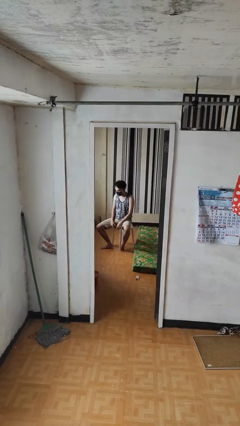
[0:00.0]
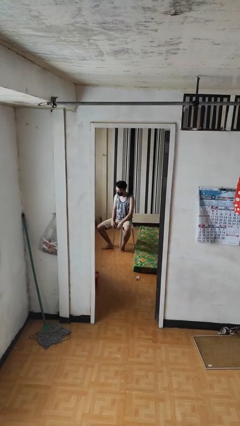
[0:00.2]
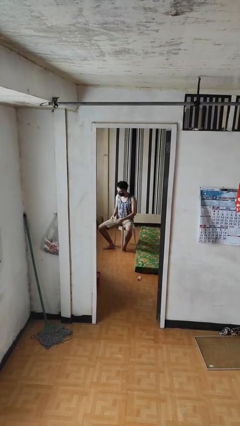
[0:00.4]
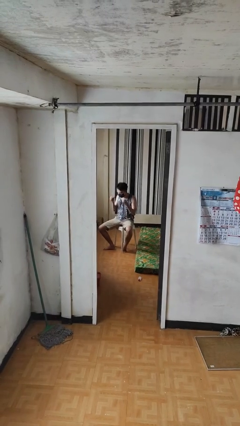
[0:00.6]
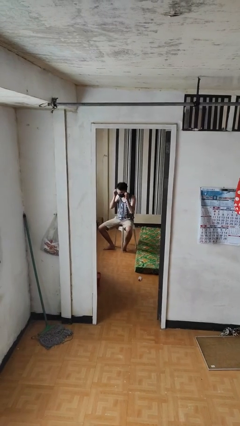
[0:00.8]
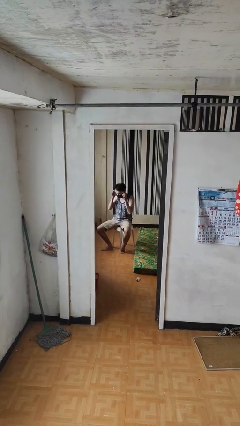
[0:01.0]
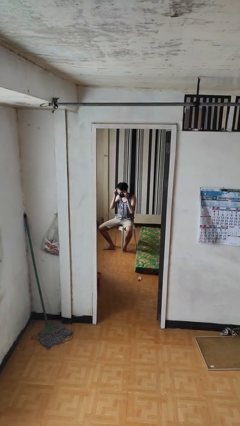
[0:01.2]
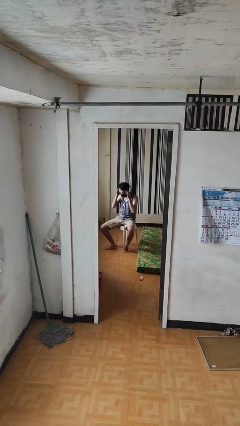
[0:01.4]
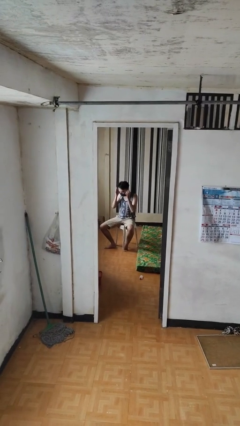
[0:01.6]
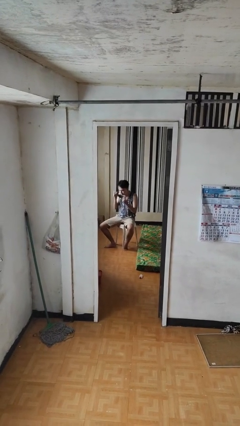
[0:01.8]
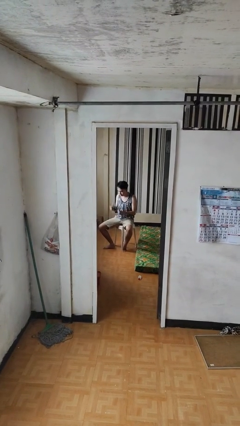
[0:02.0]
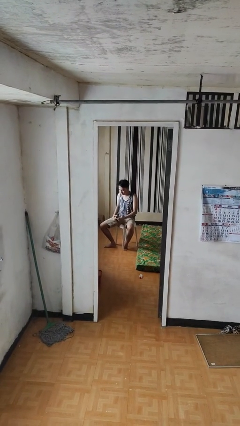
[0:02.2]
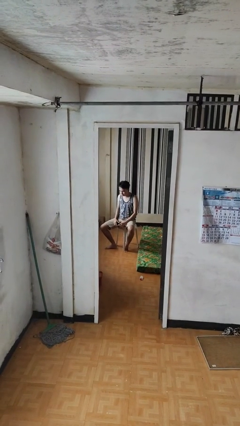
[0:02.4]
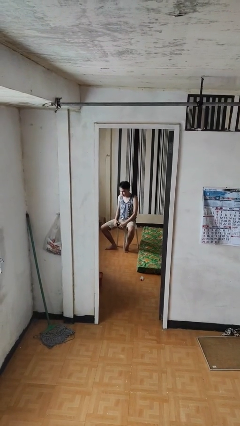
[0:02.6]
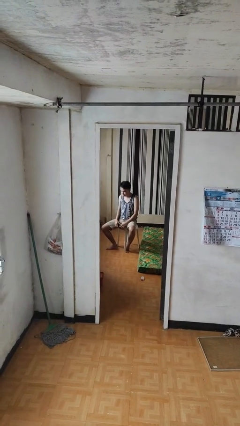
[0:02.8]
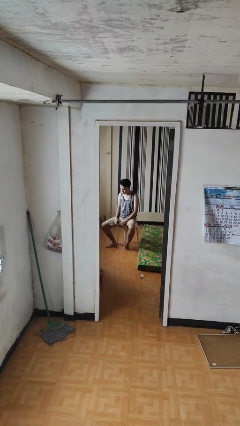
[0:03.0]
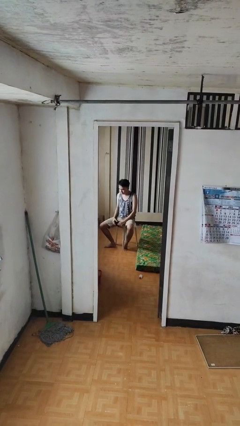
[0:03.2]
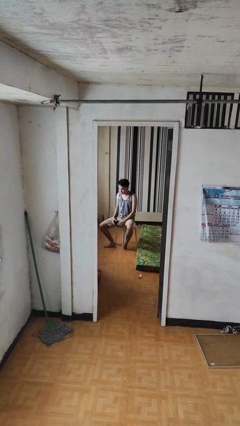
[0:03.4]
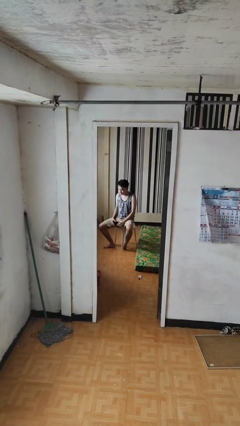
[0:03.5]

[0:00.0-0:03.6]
person takes off facemask

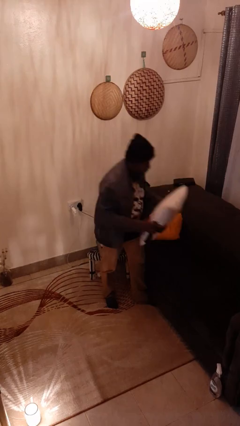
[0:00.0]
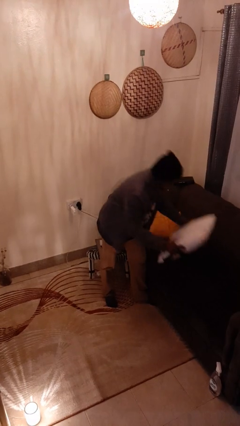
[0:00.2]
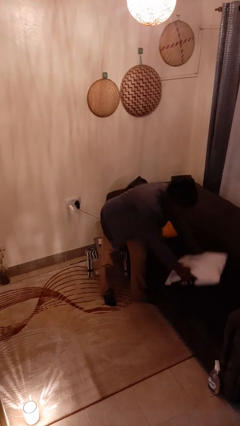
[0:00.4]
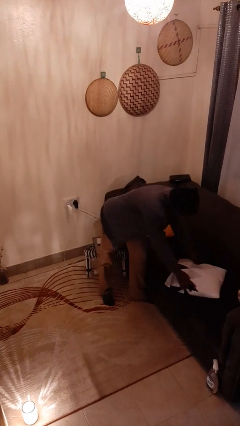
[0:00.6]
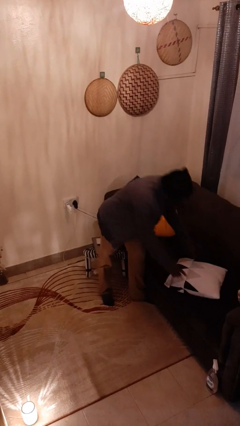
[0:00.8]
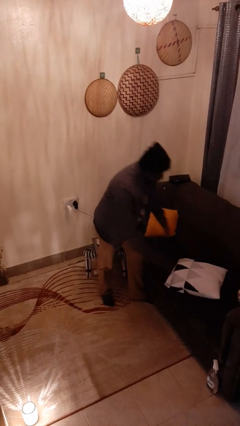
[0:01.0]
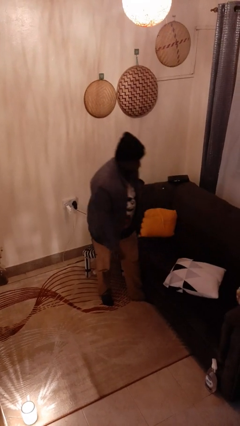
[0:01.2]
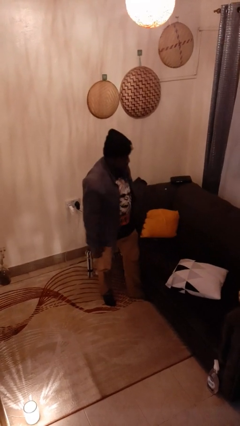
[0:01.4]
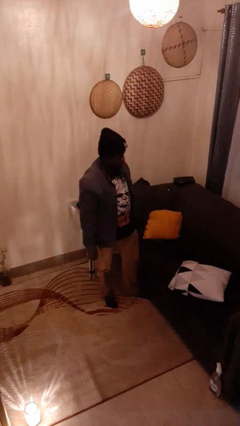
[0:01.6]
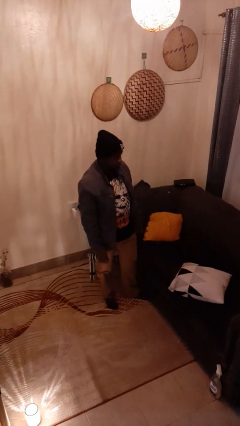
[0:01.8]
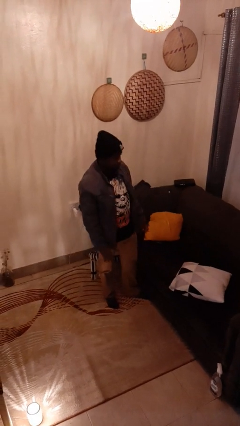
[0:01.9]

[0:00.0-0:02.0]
person puts down object on couch

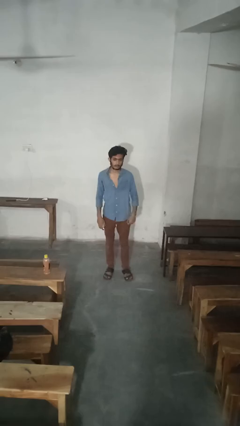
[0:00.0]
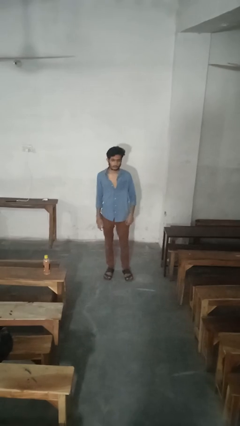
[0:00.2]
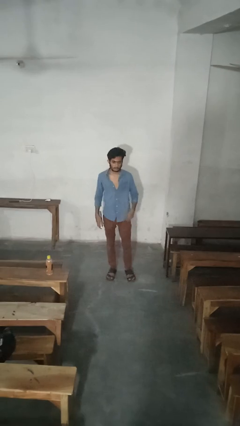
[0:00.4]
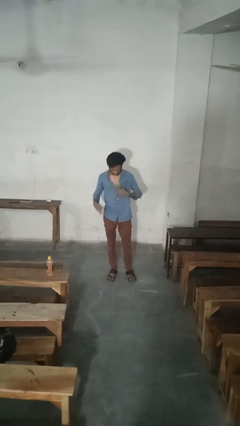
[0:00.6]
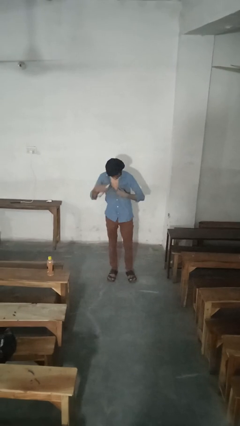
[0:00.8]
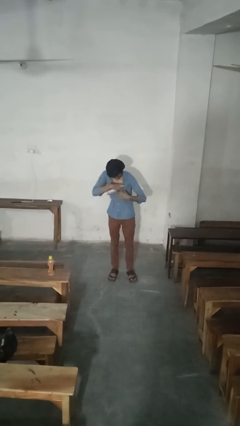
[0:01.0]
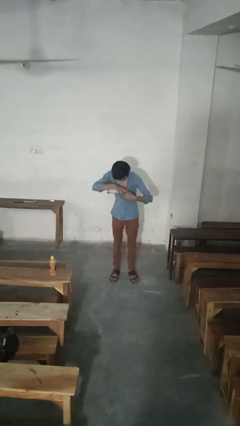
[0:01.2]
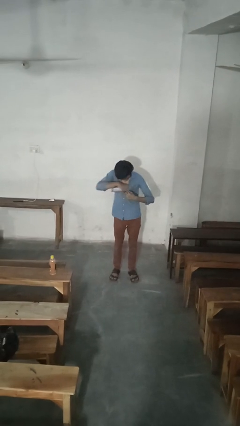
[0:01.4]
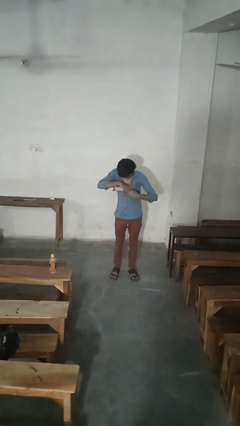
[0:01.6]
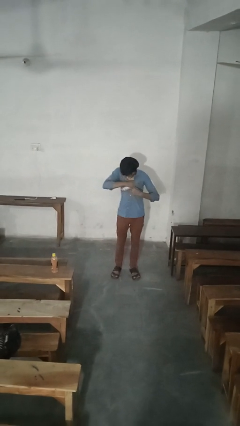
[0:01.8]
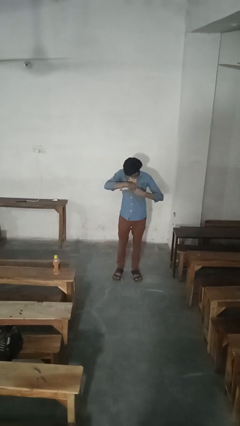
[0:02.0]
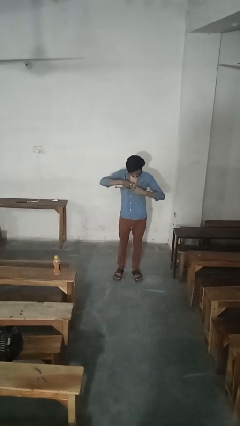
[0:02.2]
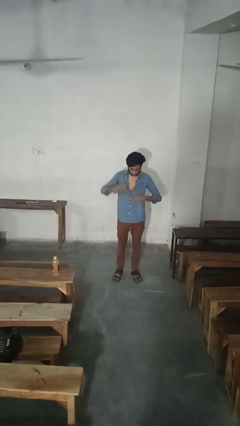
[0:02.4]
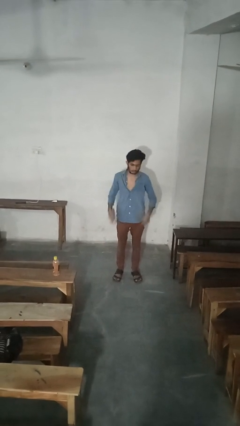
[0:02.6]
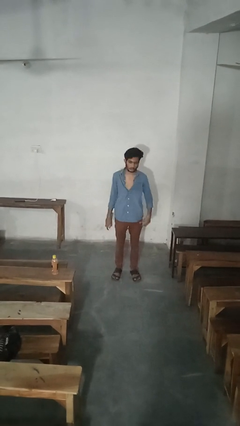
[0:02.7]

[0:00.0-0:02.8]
person applies deodorant

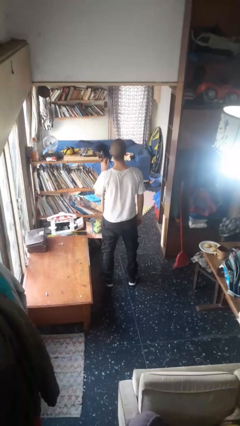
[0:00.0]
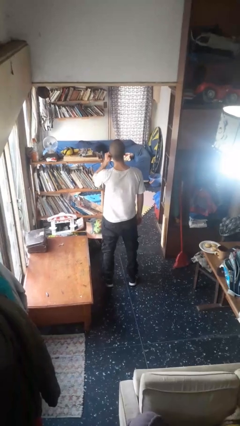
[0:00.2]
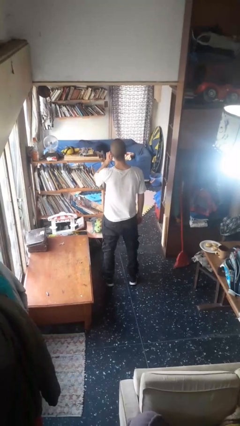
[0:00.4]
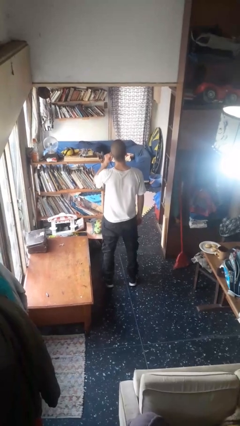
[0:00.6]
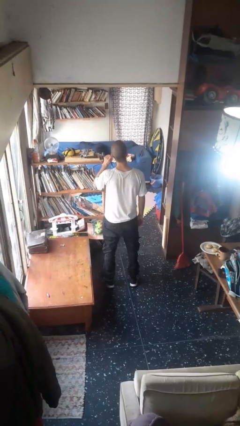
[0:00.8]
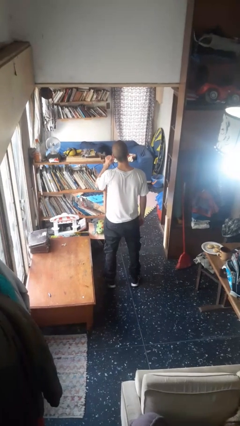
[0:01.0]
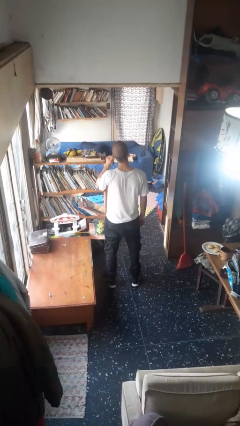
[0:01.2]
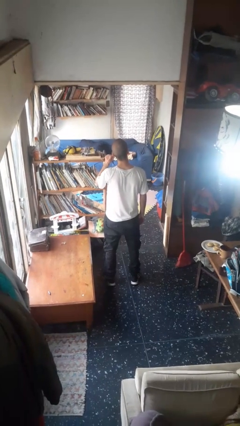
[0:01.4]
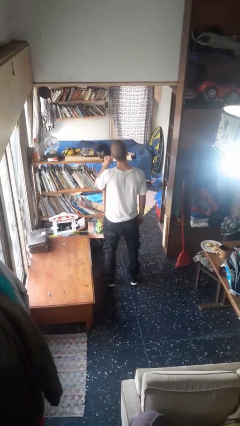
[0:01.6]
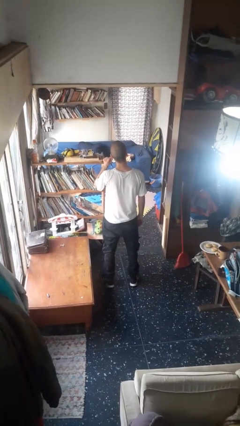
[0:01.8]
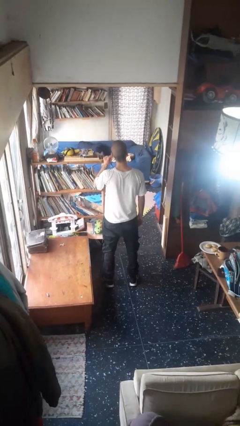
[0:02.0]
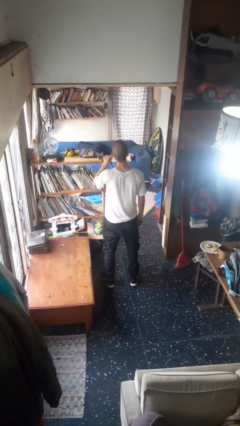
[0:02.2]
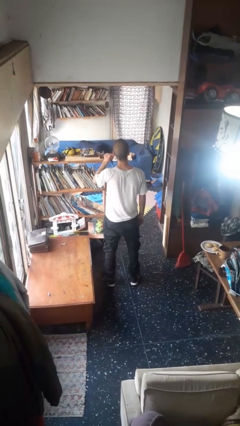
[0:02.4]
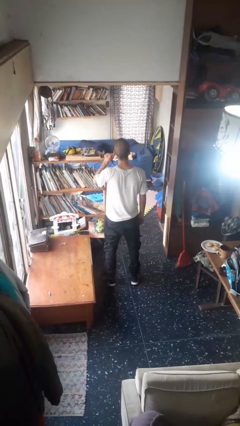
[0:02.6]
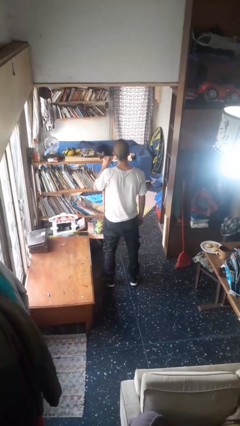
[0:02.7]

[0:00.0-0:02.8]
person touches earlobe

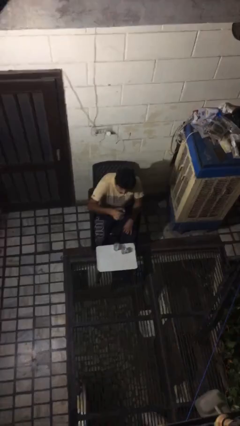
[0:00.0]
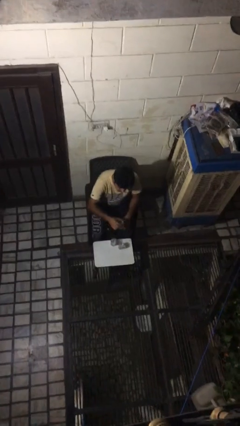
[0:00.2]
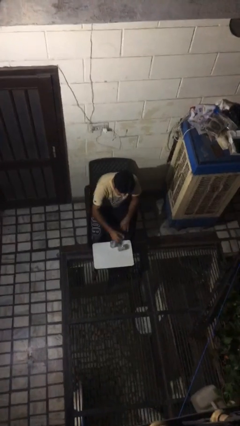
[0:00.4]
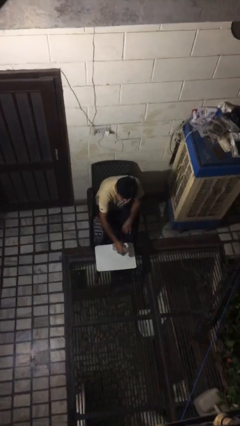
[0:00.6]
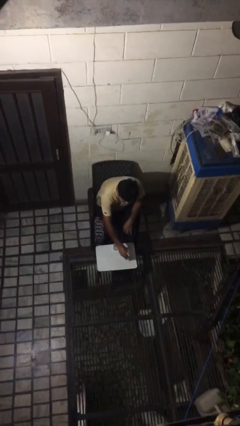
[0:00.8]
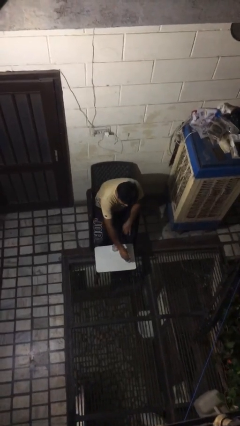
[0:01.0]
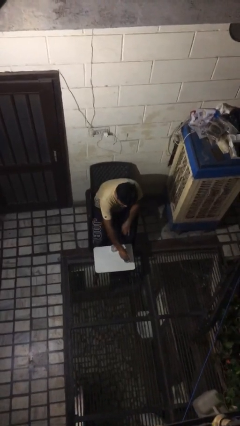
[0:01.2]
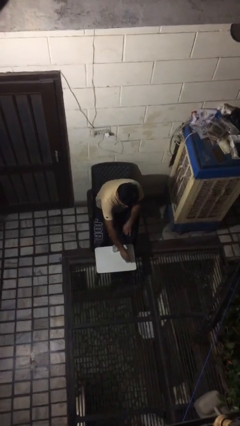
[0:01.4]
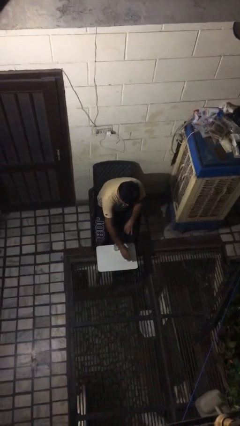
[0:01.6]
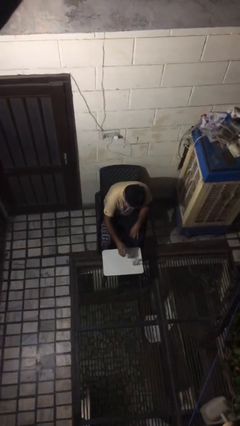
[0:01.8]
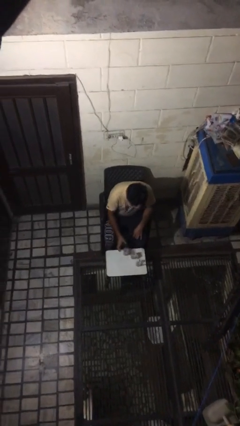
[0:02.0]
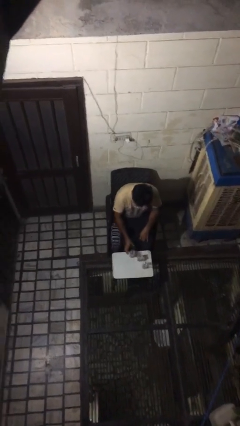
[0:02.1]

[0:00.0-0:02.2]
person puts down object on table

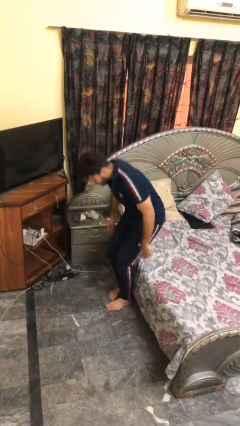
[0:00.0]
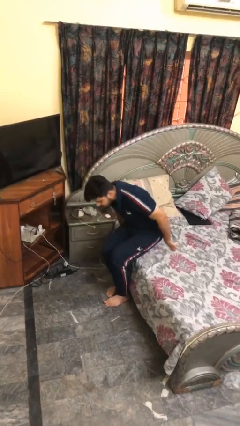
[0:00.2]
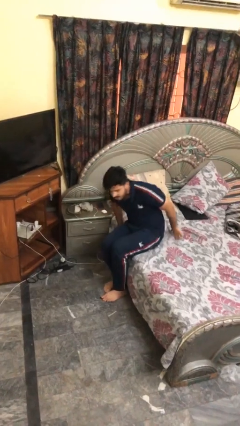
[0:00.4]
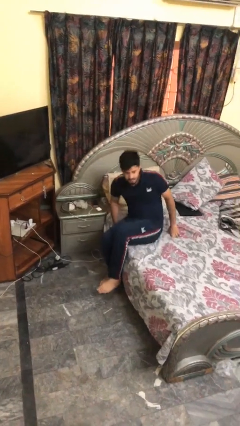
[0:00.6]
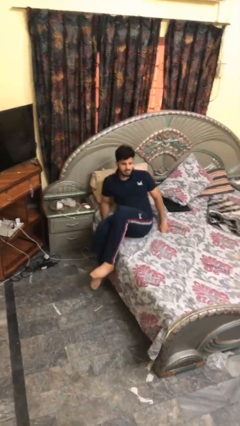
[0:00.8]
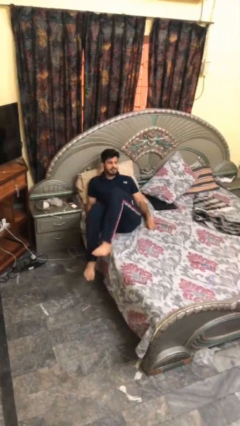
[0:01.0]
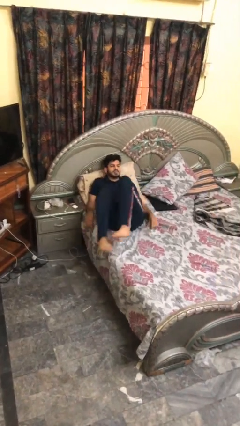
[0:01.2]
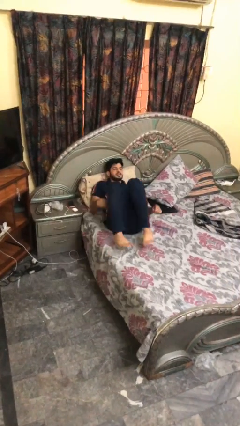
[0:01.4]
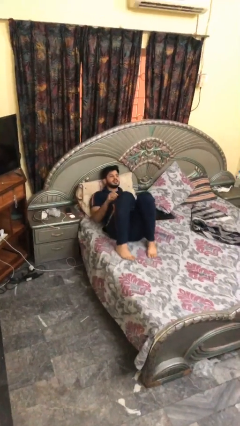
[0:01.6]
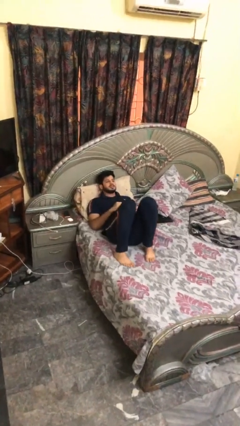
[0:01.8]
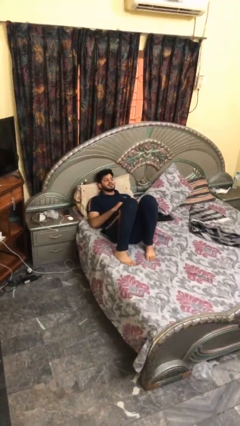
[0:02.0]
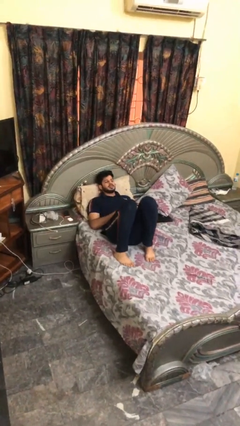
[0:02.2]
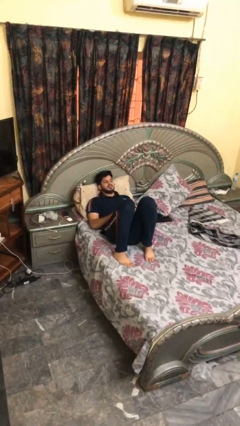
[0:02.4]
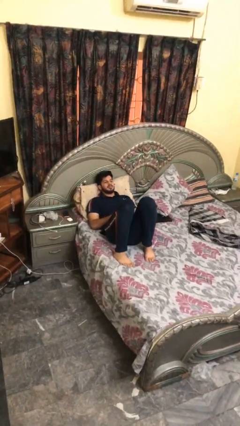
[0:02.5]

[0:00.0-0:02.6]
person lies down on bed

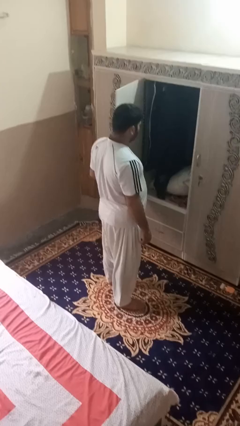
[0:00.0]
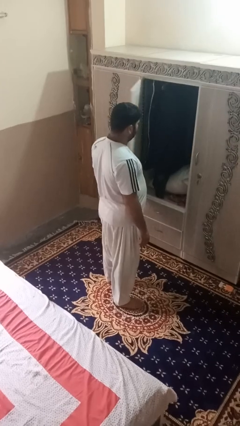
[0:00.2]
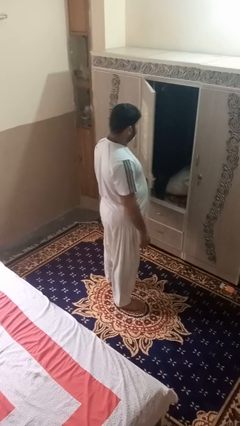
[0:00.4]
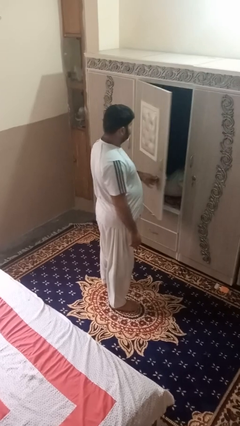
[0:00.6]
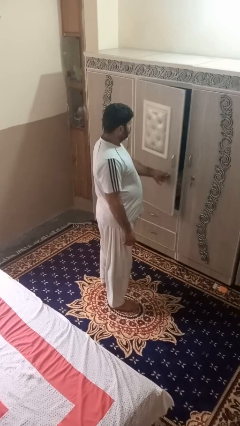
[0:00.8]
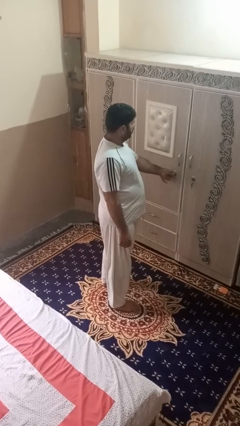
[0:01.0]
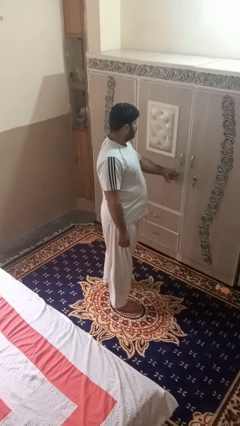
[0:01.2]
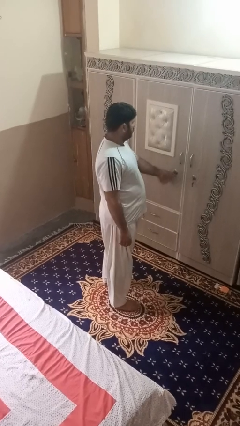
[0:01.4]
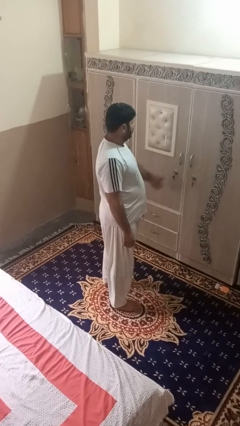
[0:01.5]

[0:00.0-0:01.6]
person closes dresser drawer
